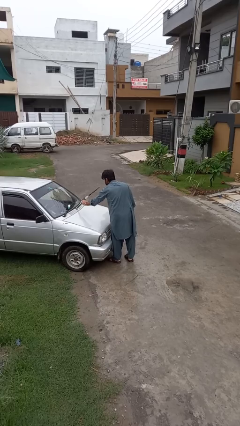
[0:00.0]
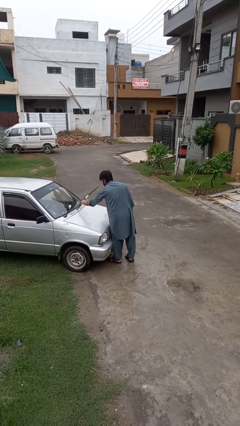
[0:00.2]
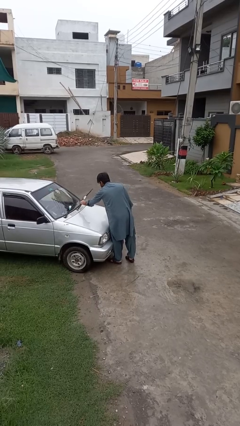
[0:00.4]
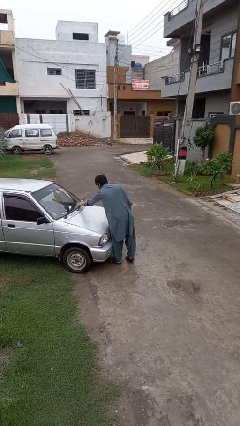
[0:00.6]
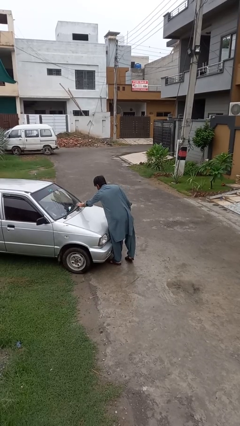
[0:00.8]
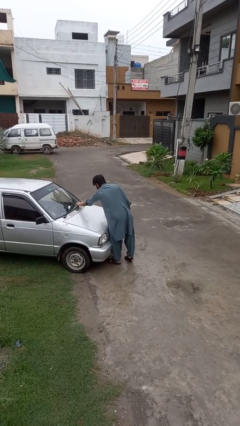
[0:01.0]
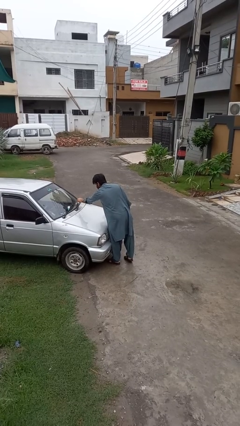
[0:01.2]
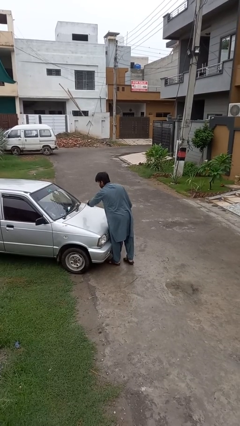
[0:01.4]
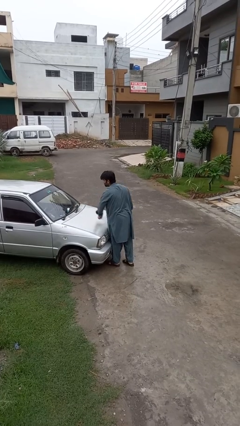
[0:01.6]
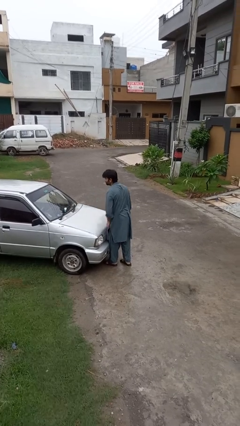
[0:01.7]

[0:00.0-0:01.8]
person flips down car wipers

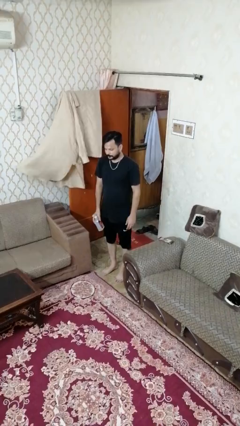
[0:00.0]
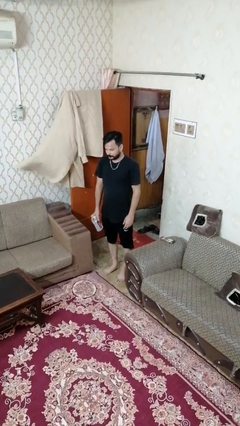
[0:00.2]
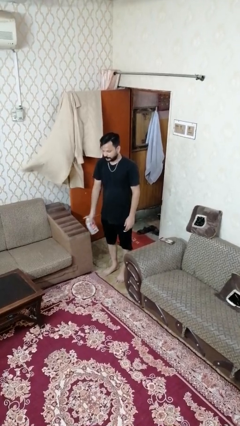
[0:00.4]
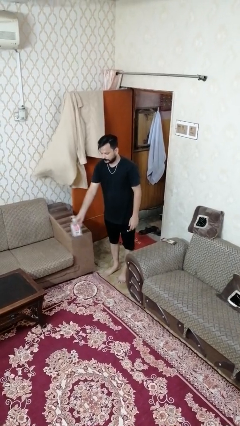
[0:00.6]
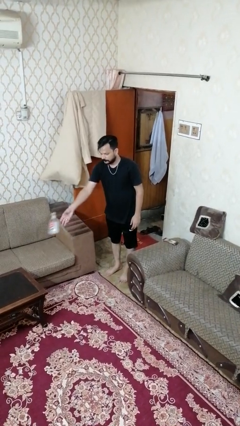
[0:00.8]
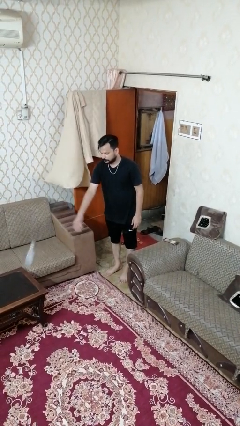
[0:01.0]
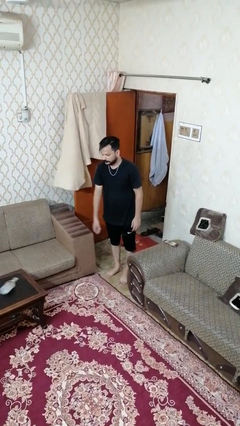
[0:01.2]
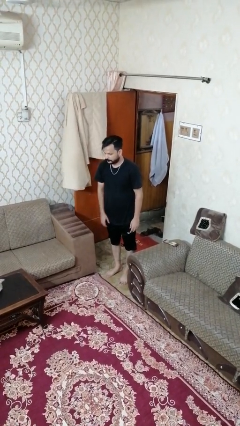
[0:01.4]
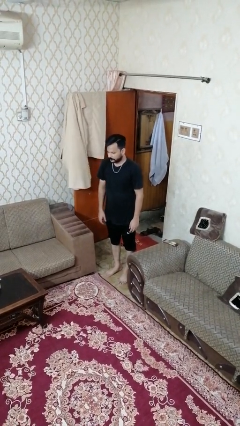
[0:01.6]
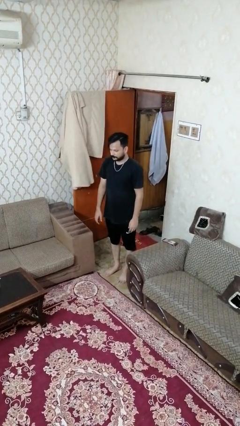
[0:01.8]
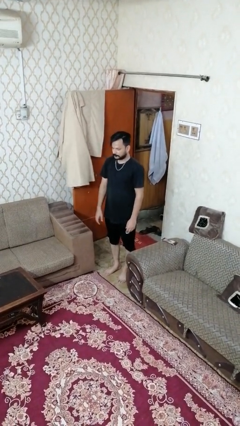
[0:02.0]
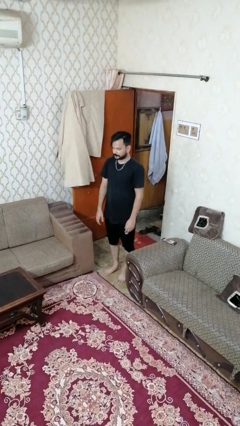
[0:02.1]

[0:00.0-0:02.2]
person throws object on table

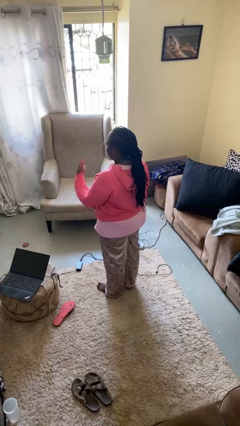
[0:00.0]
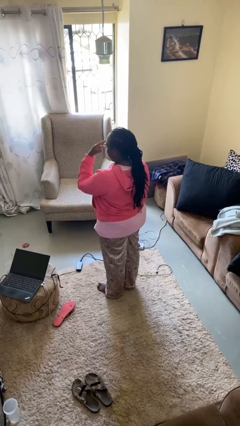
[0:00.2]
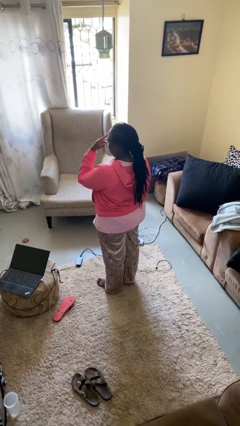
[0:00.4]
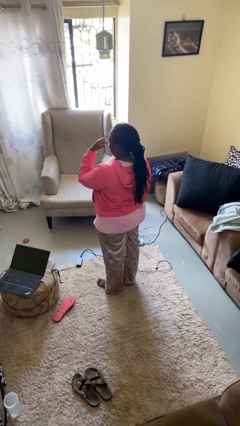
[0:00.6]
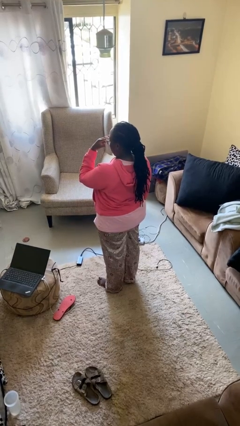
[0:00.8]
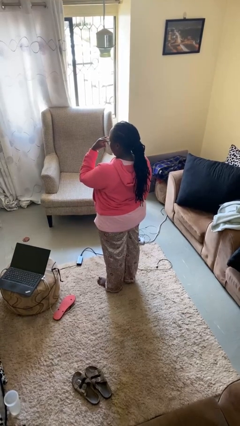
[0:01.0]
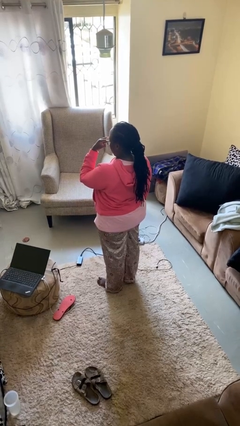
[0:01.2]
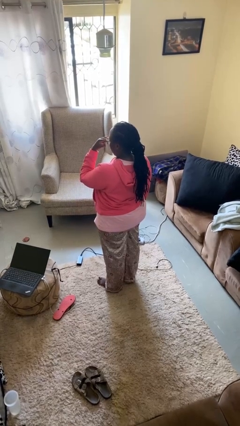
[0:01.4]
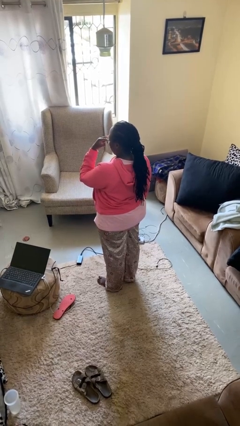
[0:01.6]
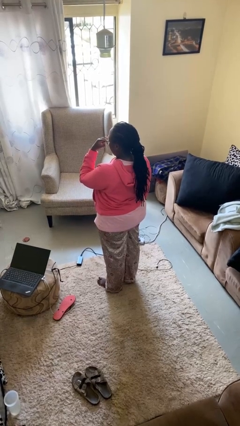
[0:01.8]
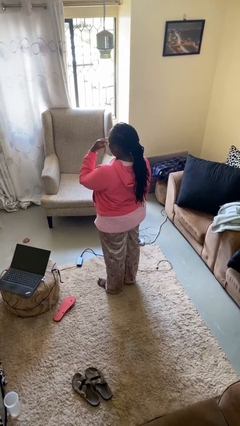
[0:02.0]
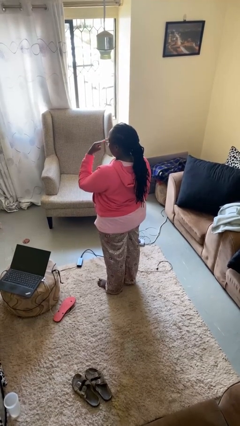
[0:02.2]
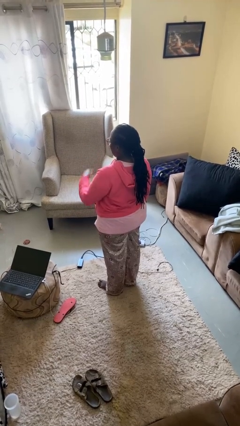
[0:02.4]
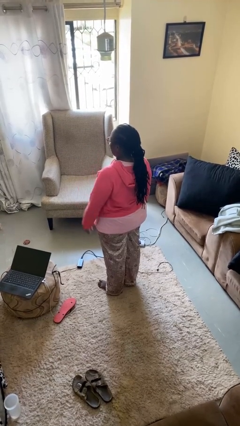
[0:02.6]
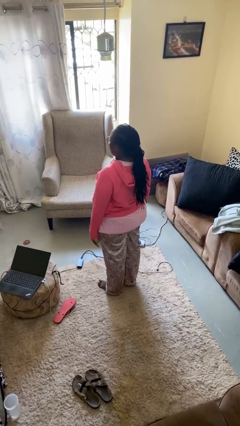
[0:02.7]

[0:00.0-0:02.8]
person gestures watch closely

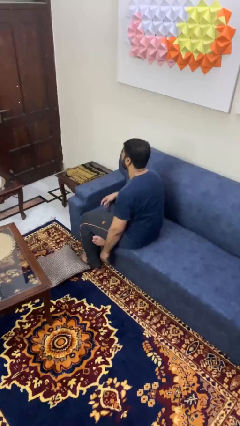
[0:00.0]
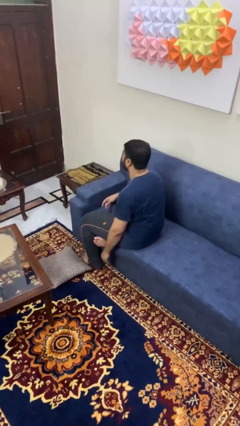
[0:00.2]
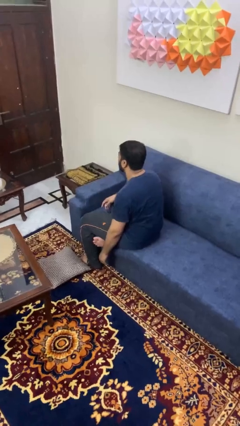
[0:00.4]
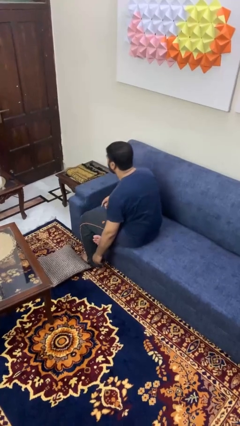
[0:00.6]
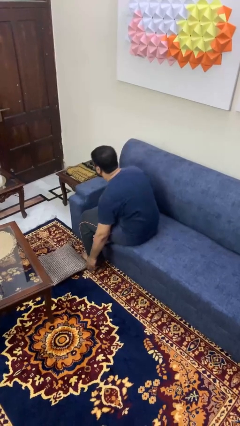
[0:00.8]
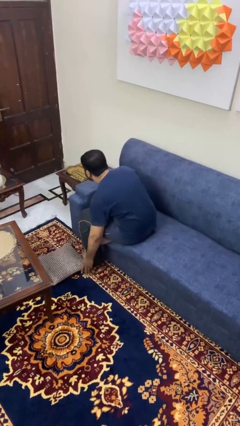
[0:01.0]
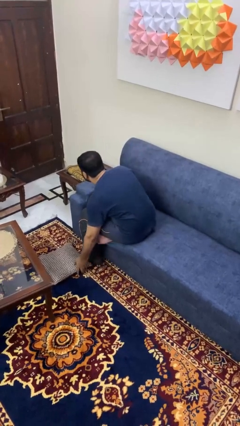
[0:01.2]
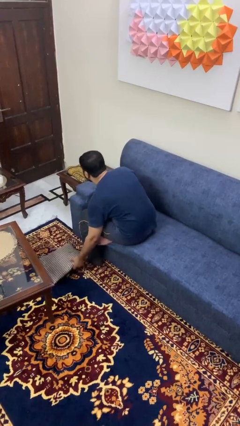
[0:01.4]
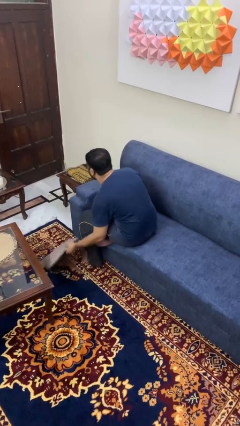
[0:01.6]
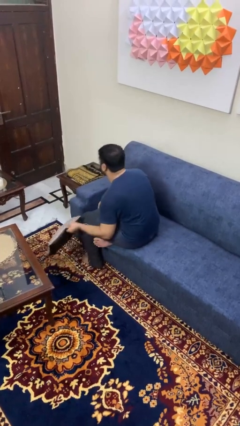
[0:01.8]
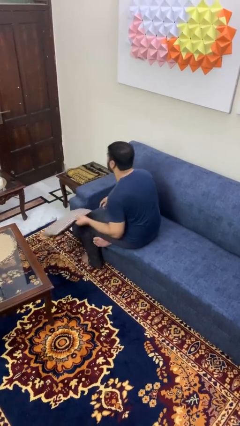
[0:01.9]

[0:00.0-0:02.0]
person picks up object from floor

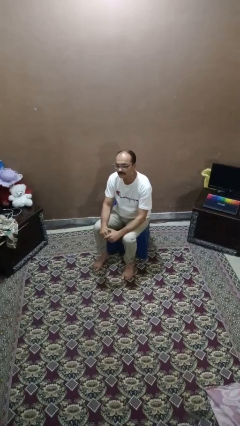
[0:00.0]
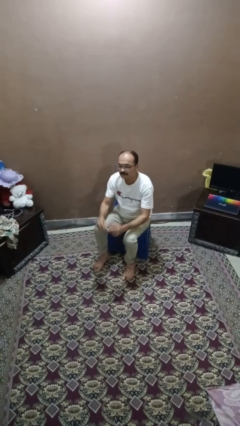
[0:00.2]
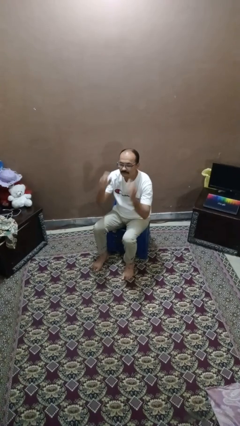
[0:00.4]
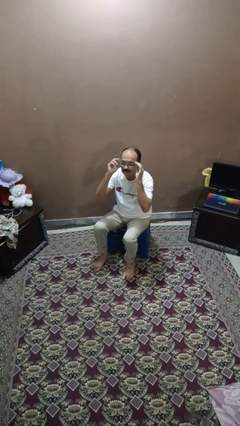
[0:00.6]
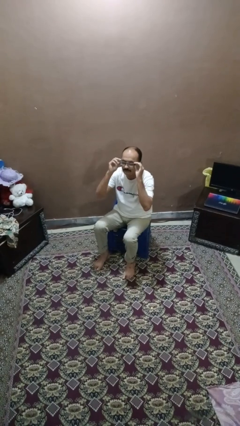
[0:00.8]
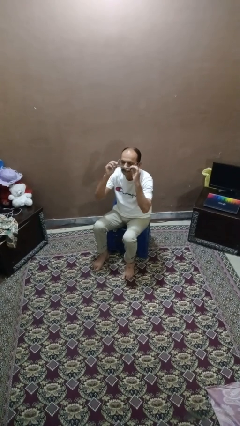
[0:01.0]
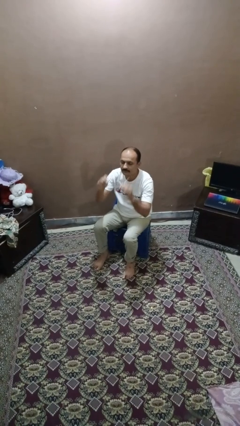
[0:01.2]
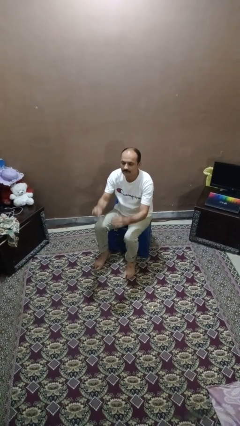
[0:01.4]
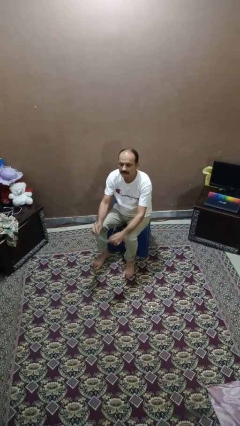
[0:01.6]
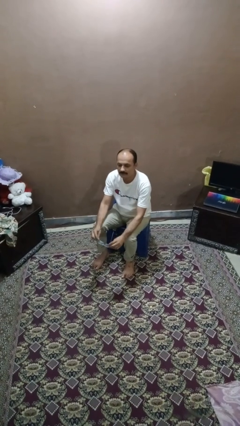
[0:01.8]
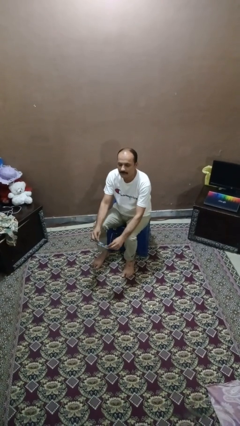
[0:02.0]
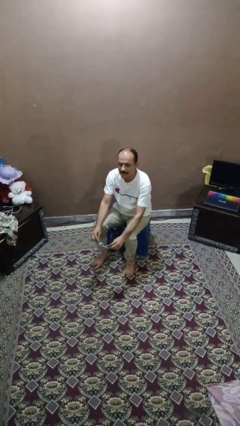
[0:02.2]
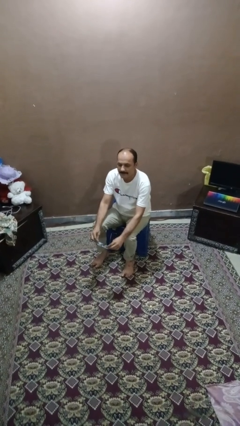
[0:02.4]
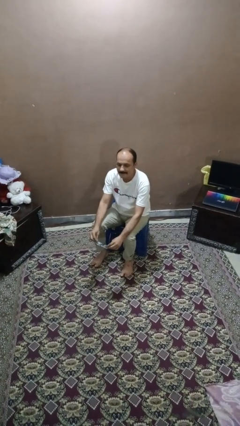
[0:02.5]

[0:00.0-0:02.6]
person takes off glasses

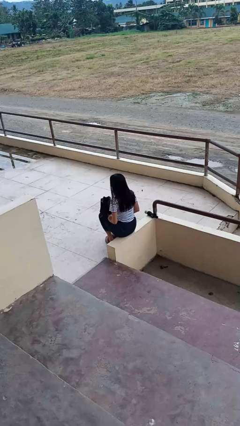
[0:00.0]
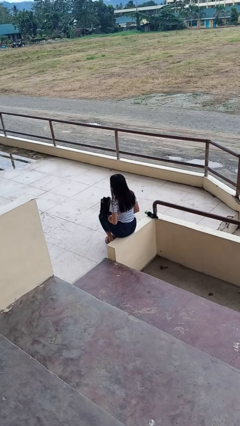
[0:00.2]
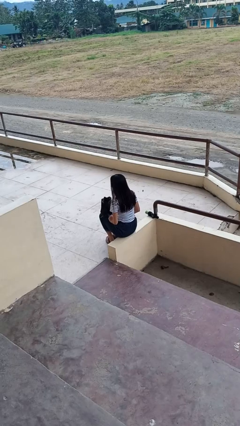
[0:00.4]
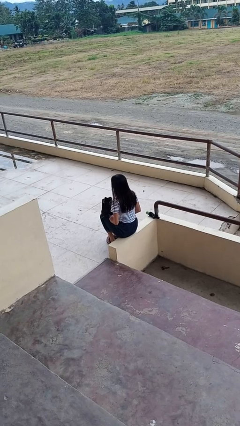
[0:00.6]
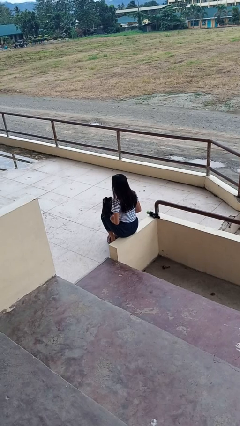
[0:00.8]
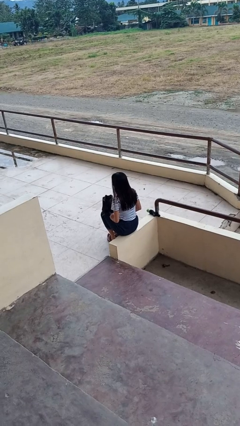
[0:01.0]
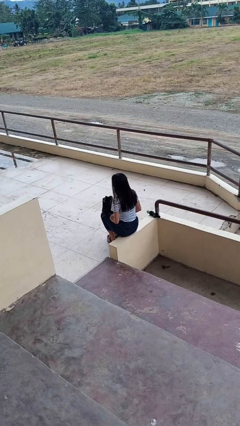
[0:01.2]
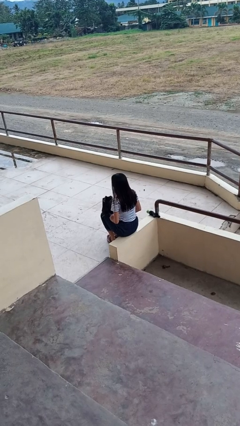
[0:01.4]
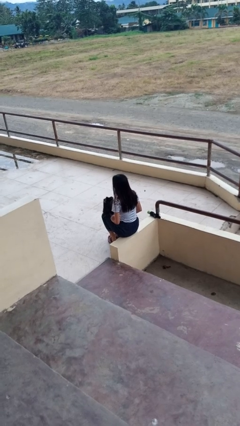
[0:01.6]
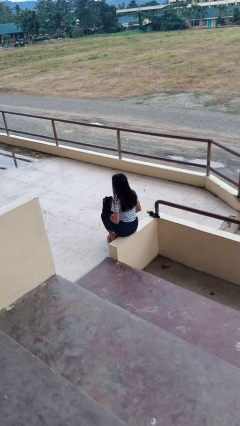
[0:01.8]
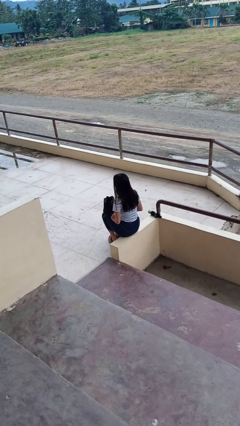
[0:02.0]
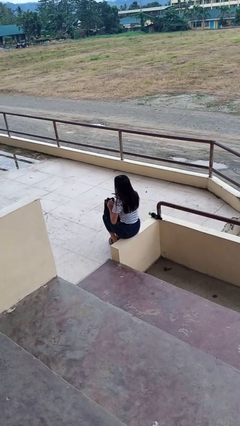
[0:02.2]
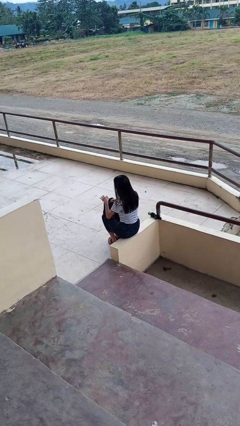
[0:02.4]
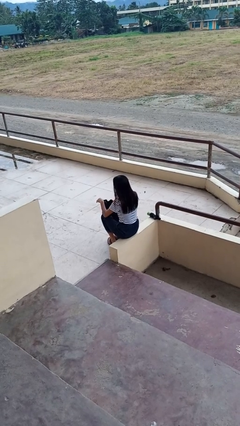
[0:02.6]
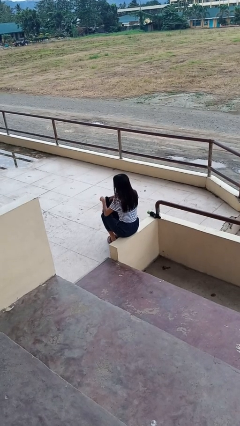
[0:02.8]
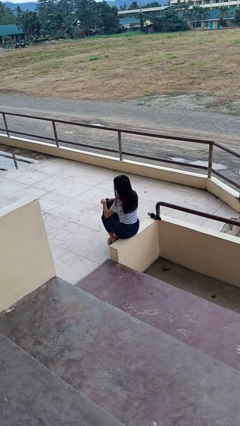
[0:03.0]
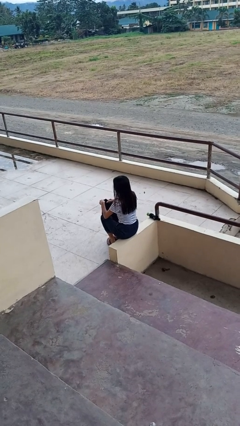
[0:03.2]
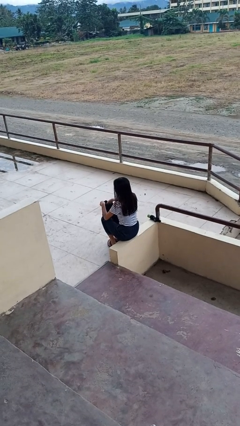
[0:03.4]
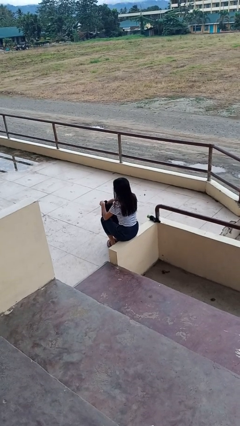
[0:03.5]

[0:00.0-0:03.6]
person searches in couch

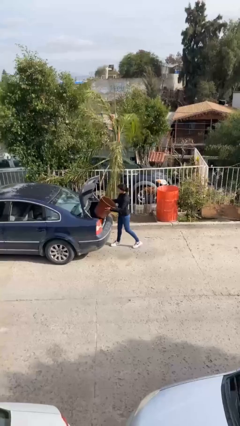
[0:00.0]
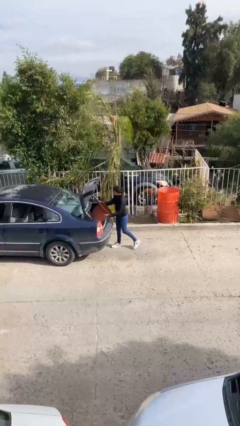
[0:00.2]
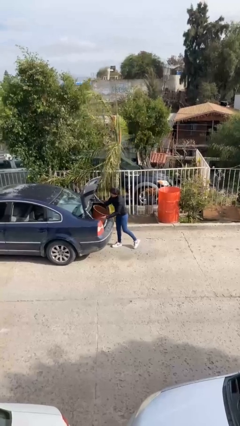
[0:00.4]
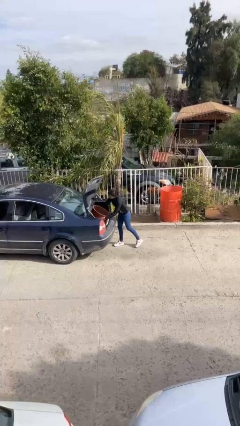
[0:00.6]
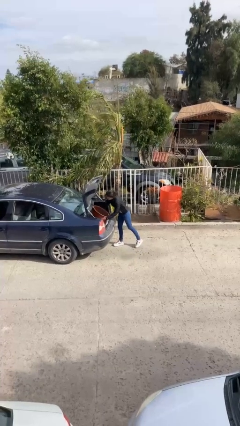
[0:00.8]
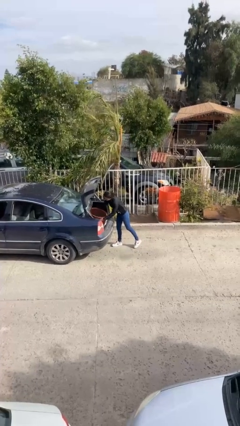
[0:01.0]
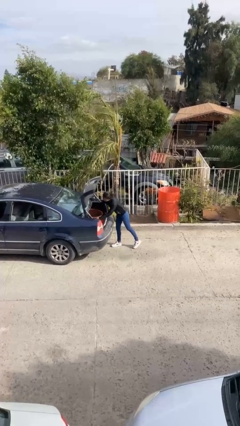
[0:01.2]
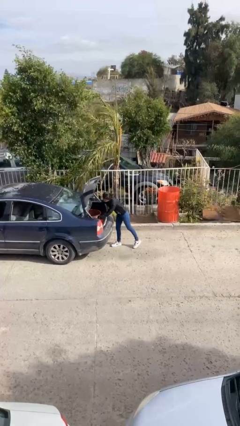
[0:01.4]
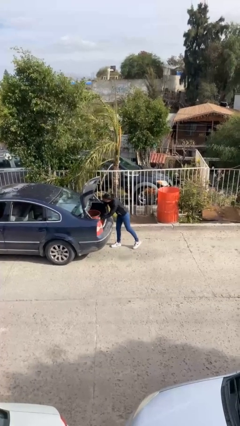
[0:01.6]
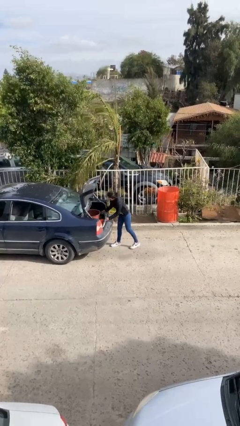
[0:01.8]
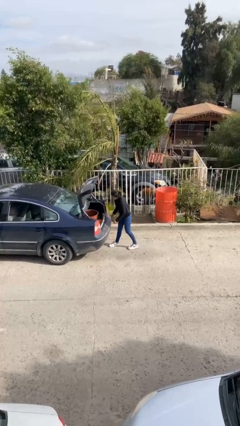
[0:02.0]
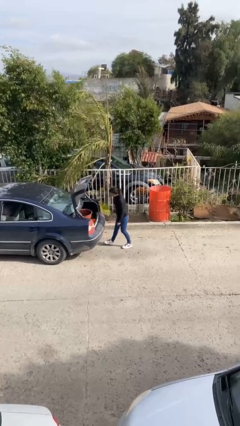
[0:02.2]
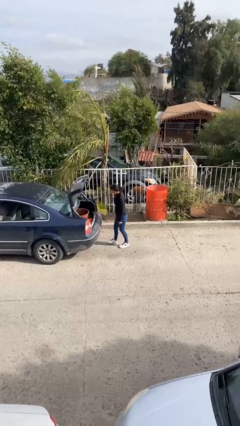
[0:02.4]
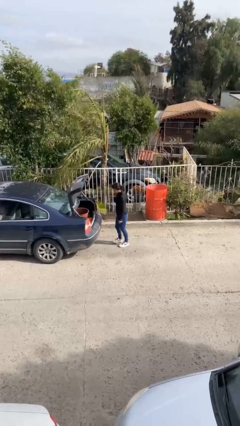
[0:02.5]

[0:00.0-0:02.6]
person loads car
